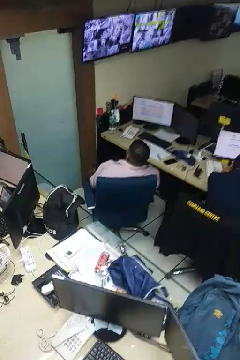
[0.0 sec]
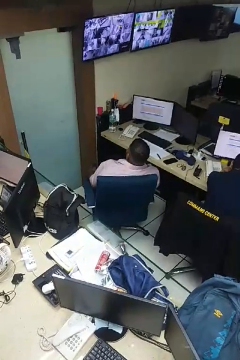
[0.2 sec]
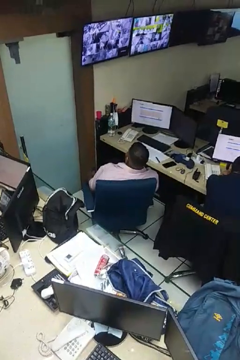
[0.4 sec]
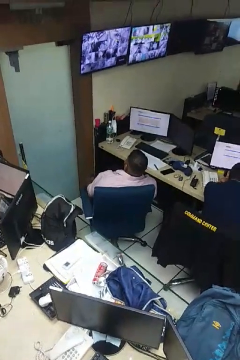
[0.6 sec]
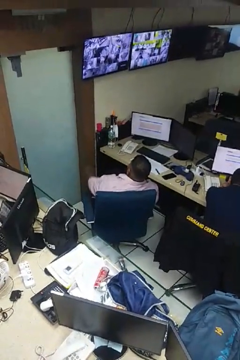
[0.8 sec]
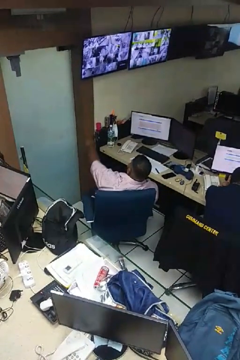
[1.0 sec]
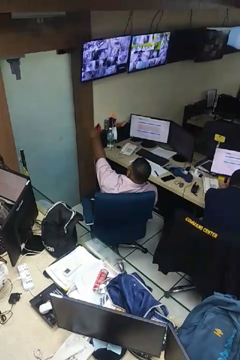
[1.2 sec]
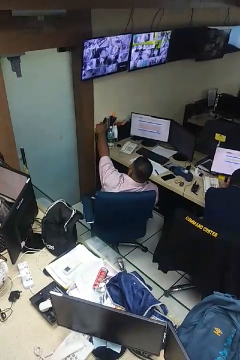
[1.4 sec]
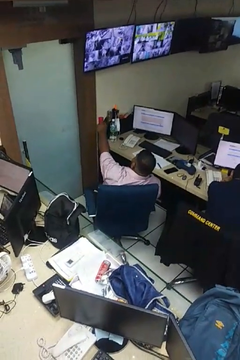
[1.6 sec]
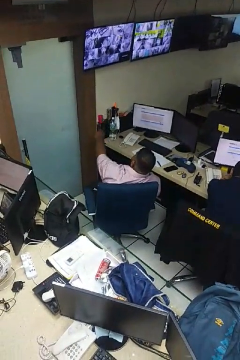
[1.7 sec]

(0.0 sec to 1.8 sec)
person uses television remote

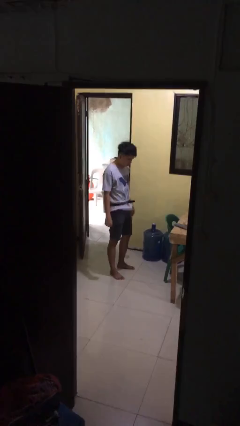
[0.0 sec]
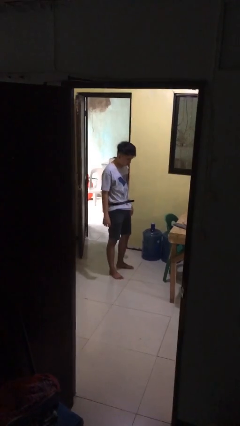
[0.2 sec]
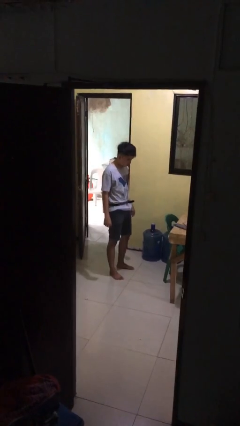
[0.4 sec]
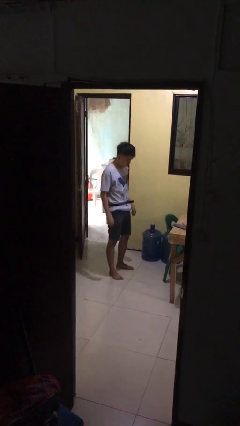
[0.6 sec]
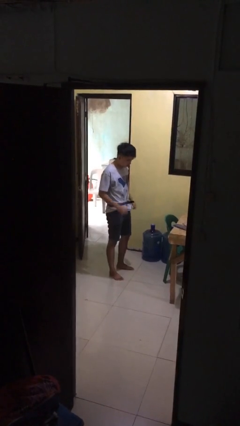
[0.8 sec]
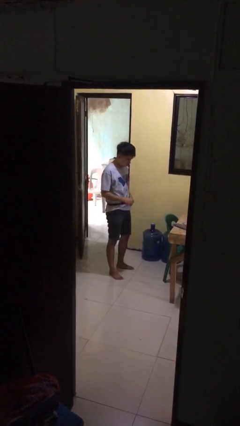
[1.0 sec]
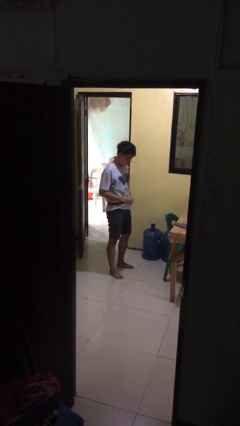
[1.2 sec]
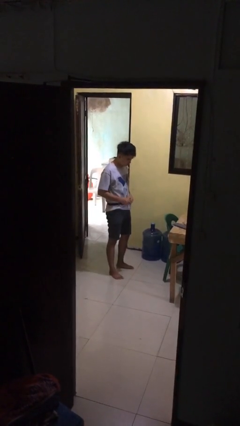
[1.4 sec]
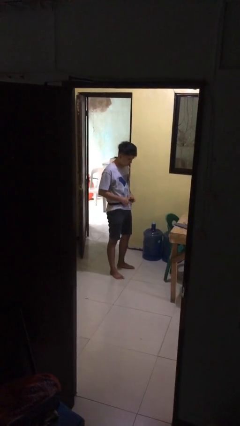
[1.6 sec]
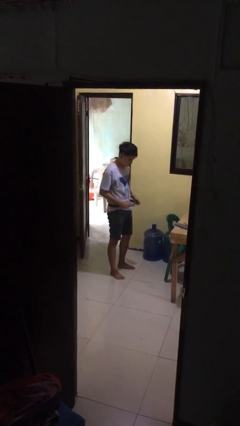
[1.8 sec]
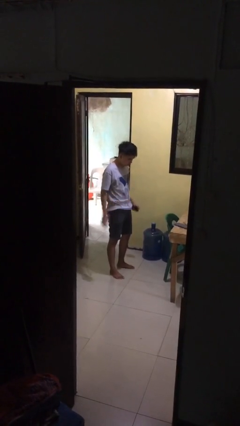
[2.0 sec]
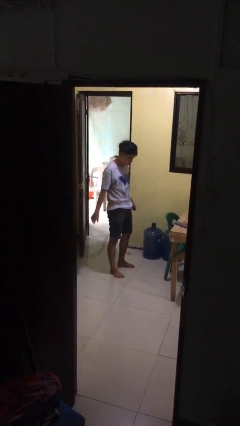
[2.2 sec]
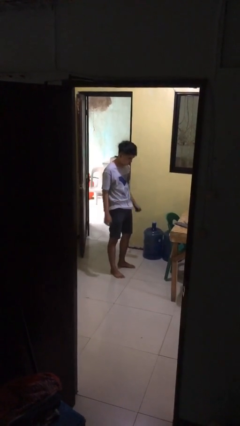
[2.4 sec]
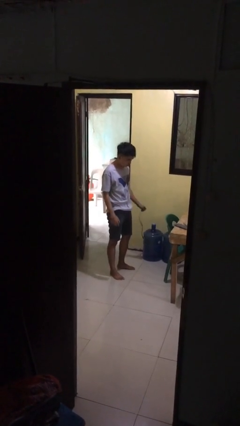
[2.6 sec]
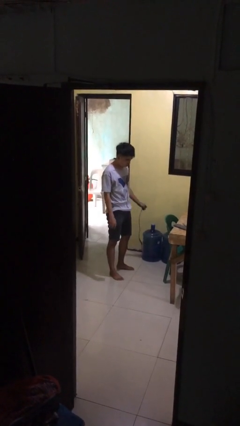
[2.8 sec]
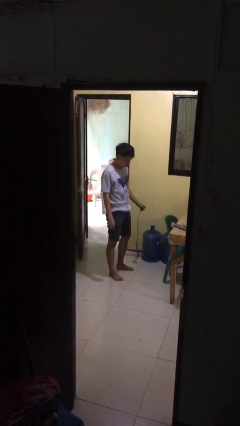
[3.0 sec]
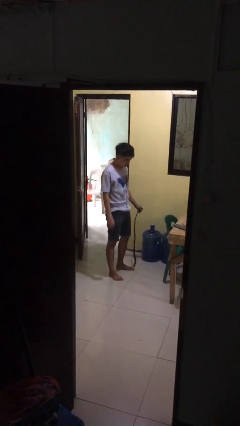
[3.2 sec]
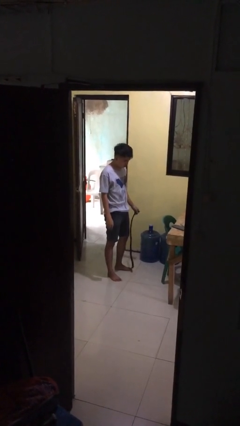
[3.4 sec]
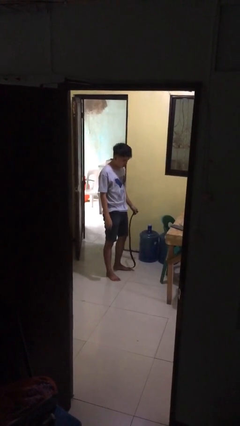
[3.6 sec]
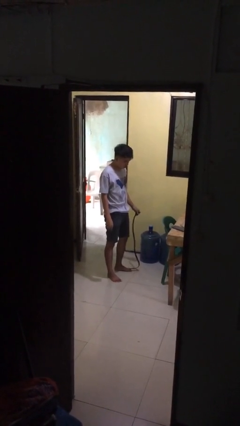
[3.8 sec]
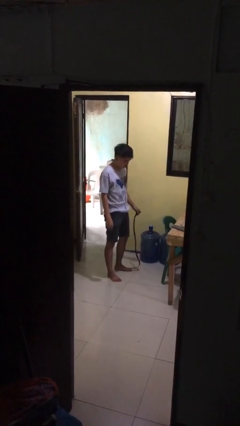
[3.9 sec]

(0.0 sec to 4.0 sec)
person takes off belt

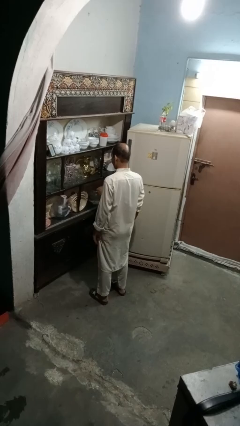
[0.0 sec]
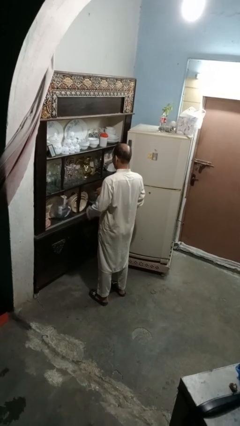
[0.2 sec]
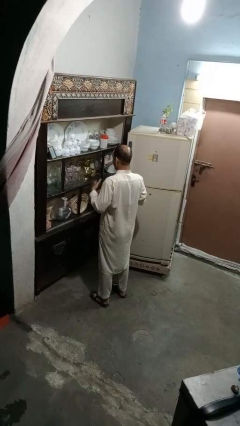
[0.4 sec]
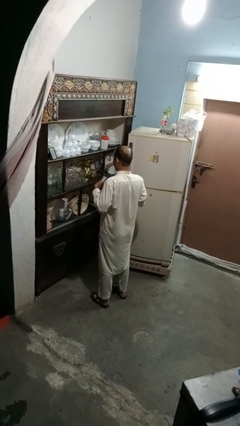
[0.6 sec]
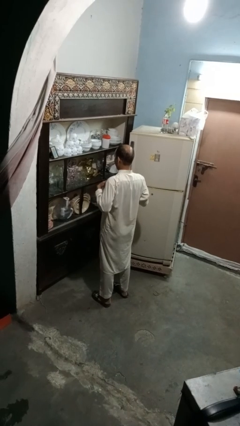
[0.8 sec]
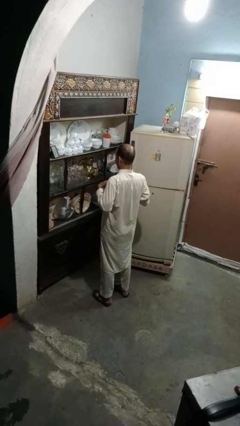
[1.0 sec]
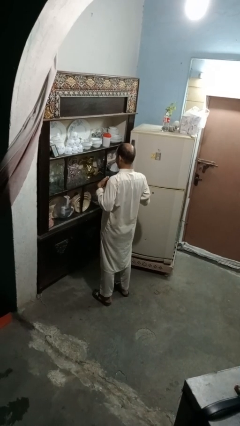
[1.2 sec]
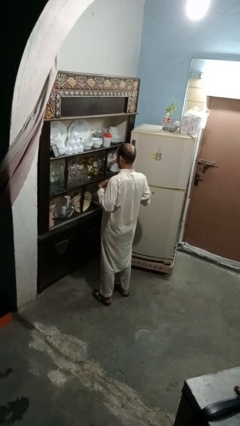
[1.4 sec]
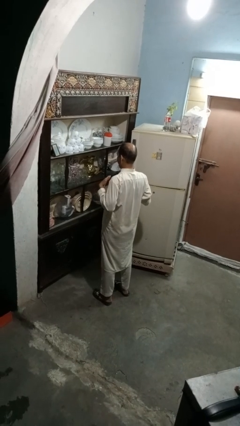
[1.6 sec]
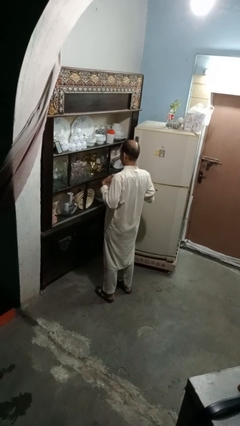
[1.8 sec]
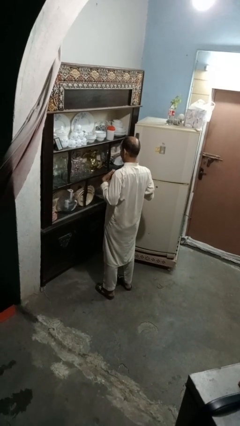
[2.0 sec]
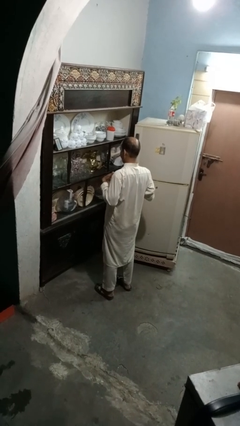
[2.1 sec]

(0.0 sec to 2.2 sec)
person drums on chest

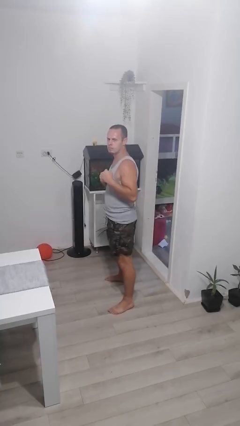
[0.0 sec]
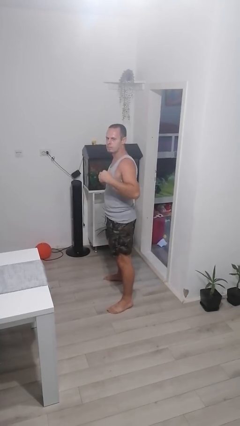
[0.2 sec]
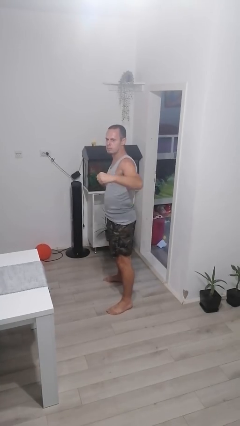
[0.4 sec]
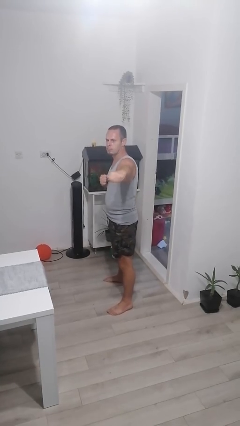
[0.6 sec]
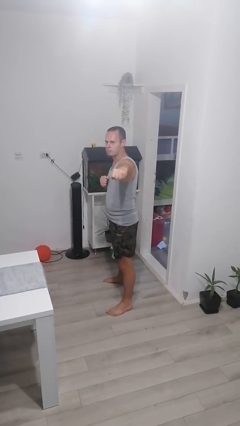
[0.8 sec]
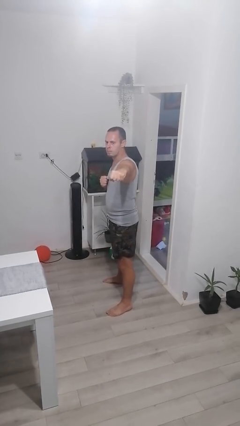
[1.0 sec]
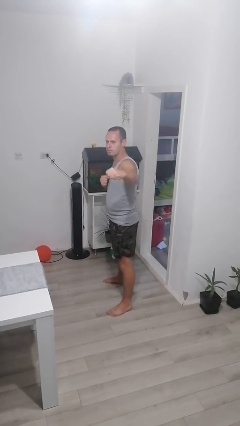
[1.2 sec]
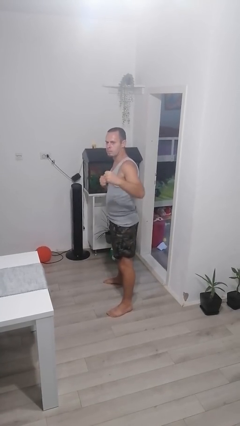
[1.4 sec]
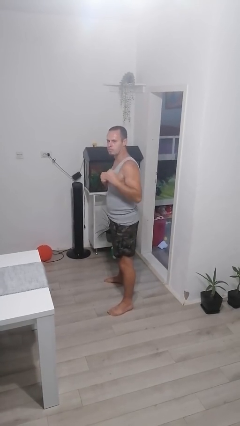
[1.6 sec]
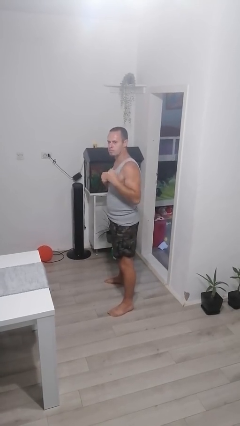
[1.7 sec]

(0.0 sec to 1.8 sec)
person karate chop

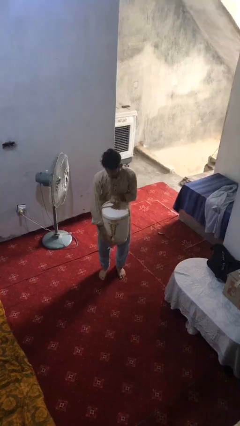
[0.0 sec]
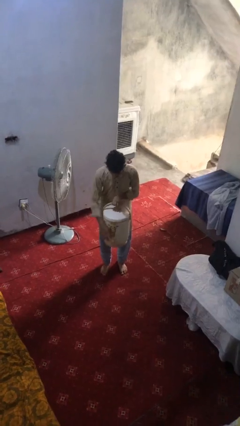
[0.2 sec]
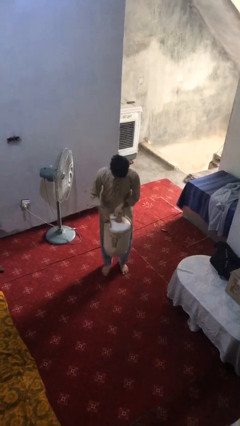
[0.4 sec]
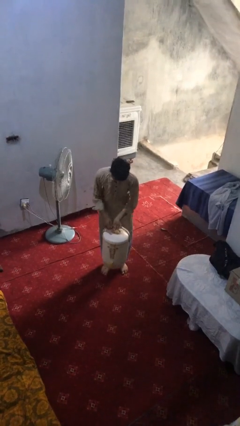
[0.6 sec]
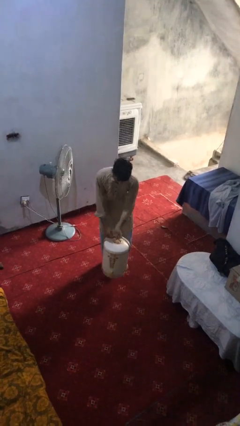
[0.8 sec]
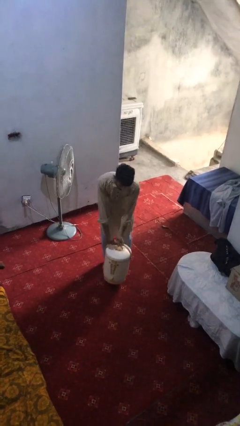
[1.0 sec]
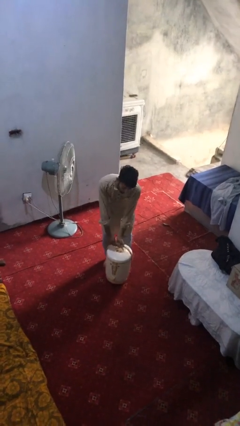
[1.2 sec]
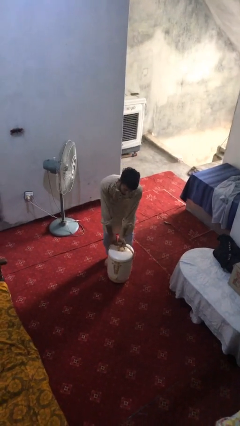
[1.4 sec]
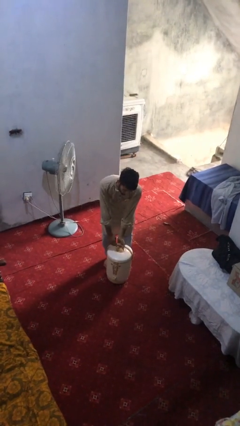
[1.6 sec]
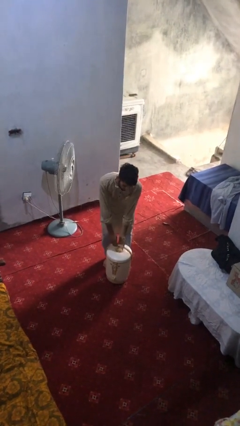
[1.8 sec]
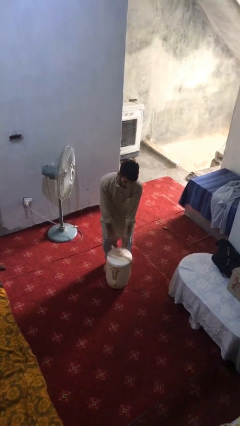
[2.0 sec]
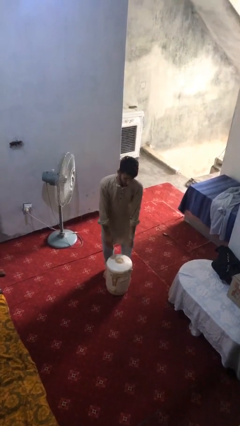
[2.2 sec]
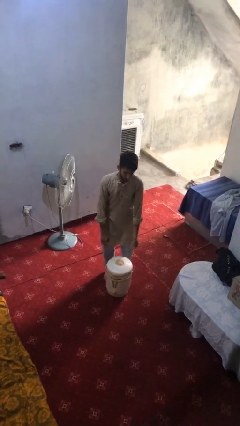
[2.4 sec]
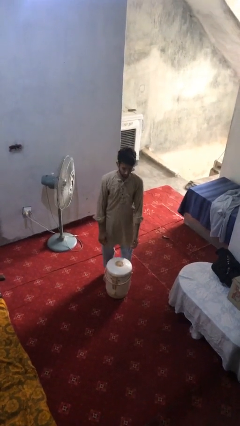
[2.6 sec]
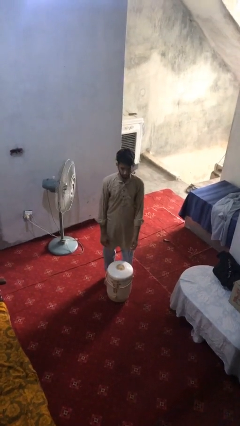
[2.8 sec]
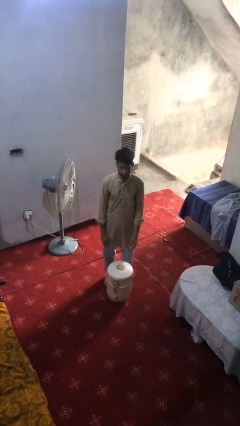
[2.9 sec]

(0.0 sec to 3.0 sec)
person puts down object on floor

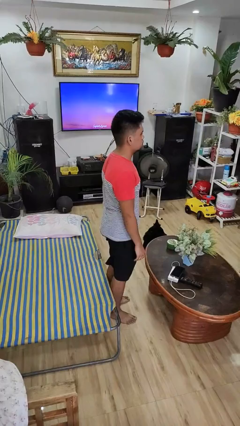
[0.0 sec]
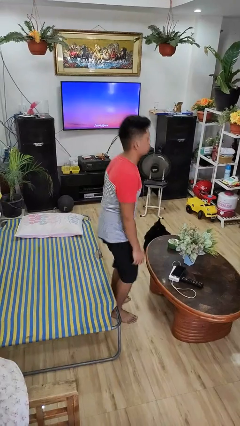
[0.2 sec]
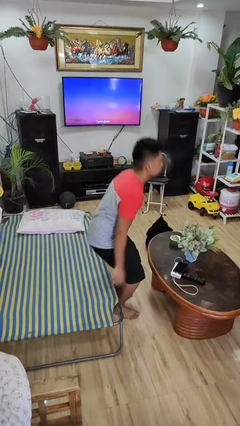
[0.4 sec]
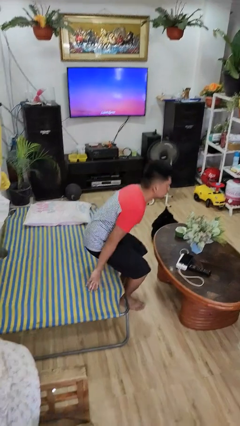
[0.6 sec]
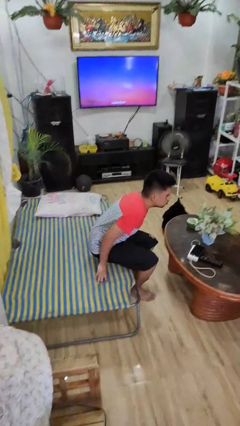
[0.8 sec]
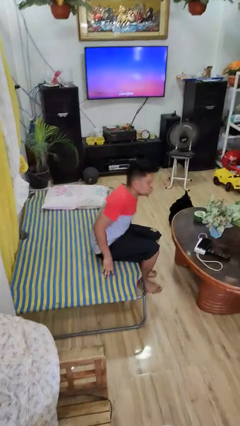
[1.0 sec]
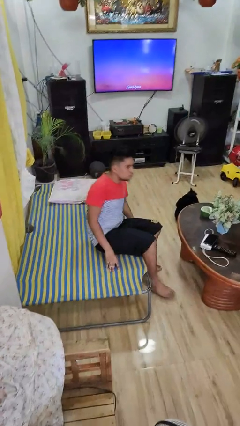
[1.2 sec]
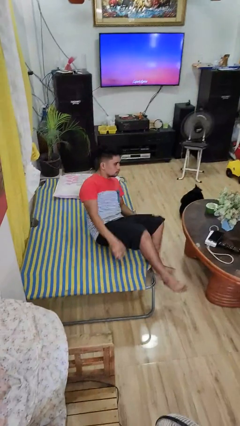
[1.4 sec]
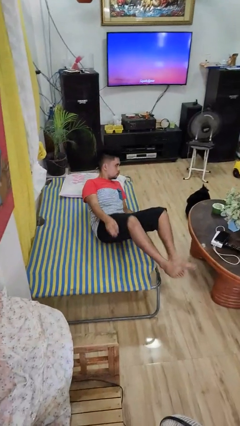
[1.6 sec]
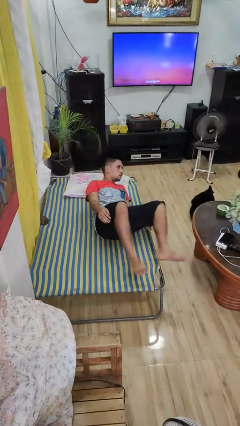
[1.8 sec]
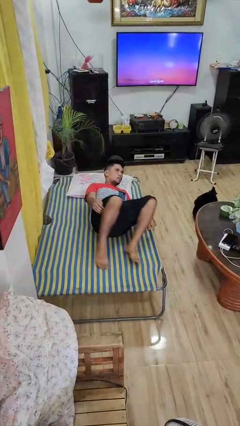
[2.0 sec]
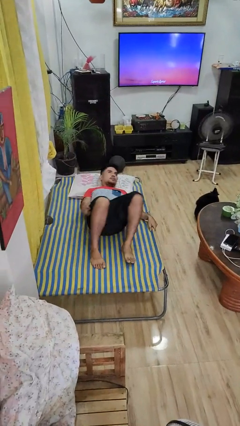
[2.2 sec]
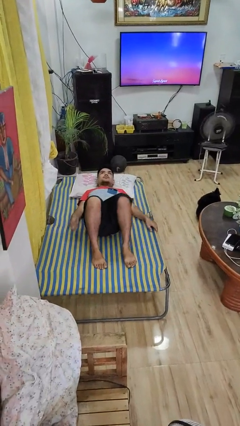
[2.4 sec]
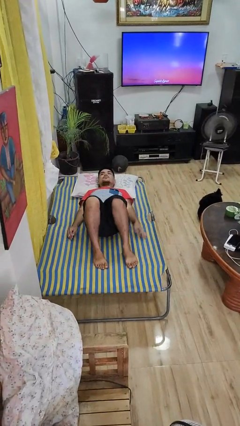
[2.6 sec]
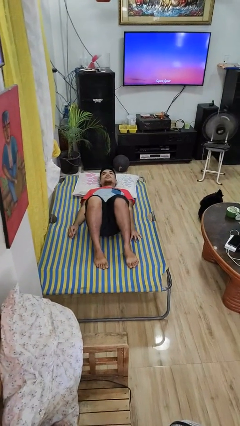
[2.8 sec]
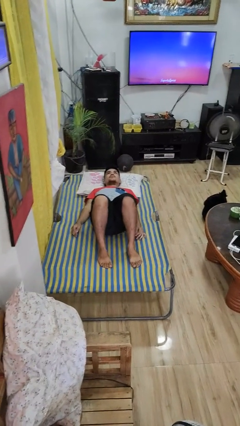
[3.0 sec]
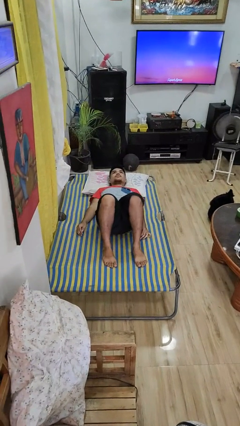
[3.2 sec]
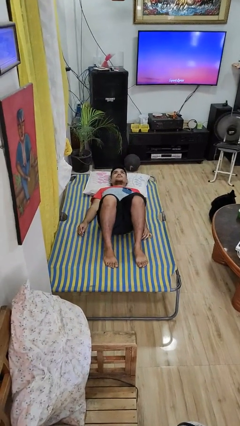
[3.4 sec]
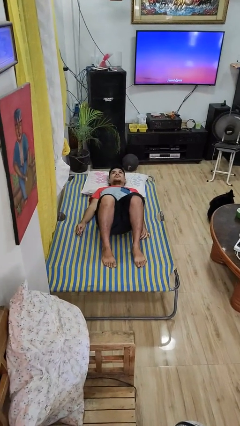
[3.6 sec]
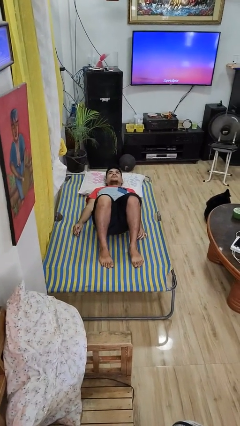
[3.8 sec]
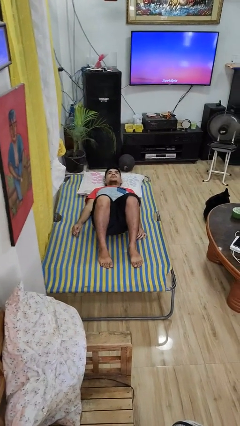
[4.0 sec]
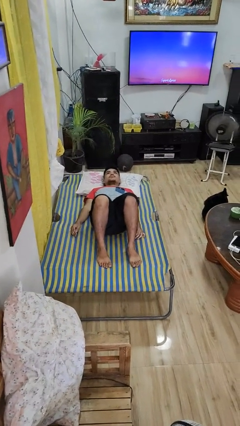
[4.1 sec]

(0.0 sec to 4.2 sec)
person lies down on bed
